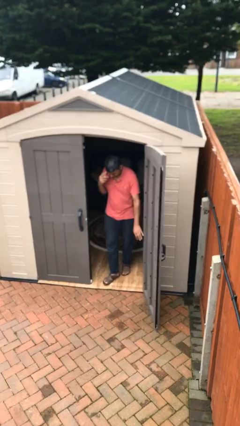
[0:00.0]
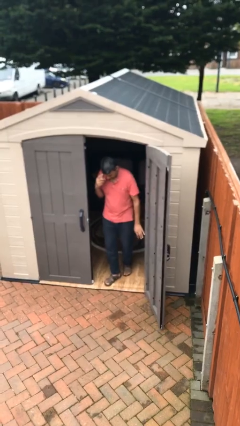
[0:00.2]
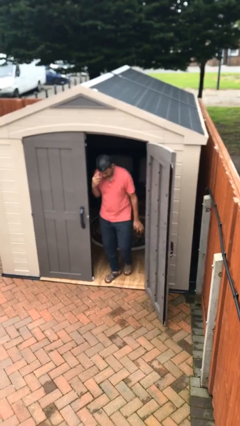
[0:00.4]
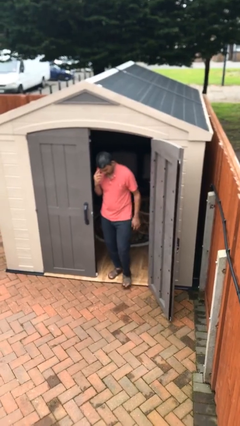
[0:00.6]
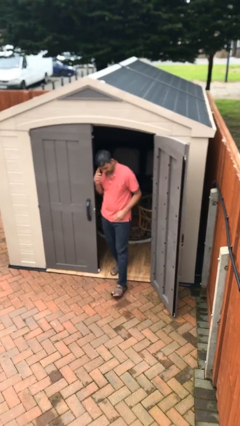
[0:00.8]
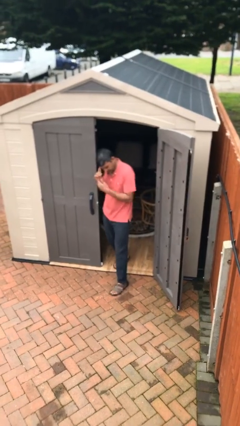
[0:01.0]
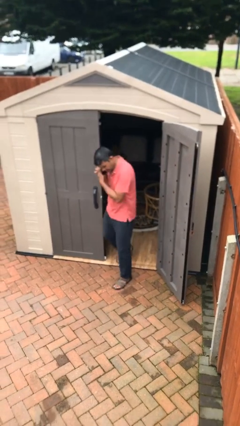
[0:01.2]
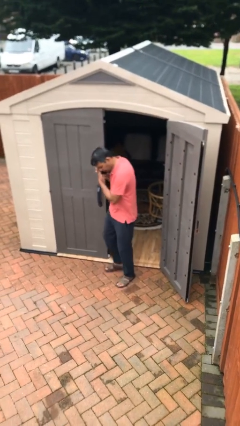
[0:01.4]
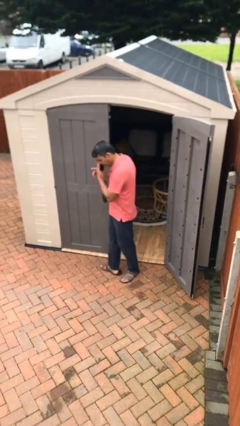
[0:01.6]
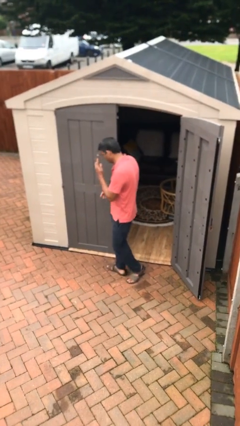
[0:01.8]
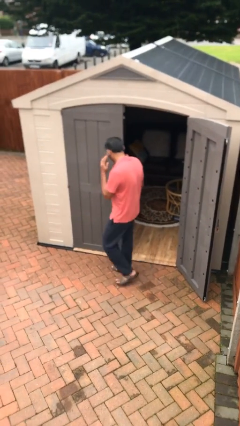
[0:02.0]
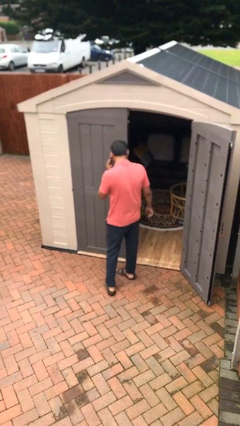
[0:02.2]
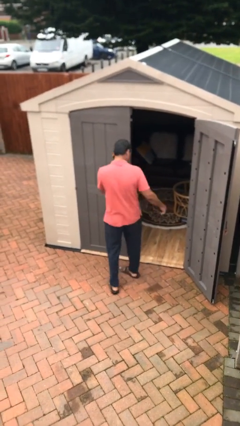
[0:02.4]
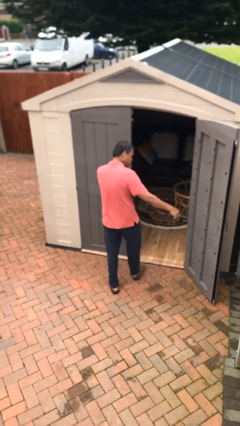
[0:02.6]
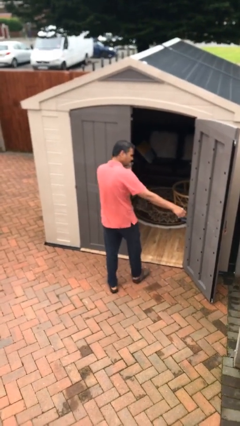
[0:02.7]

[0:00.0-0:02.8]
person enters scene through structure

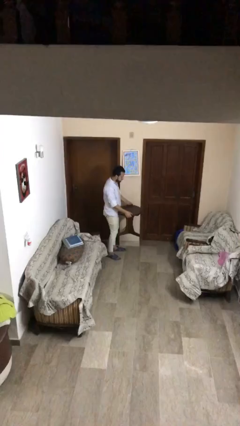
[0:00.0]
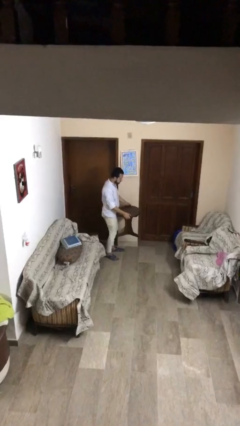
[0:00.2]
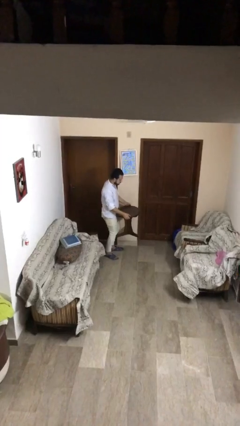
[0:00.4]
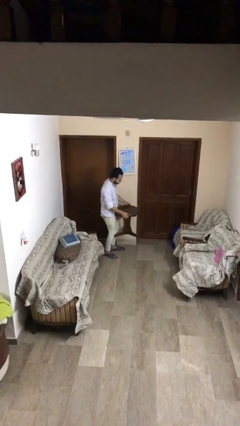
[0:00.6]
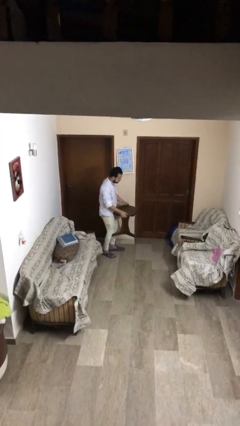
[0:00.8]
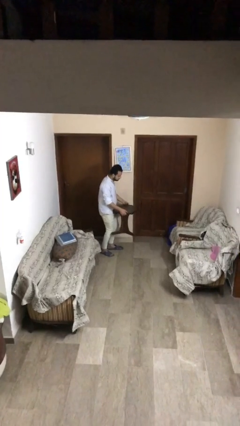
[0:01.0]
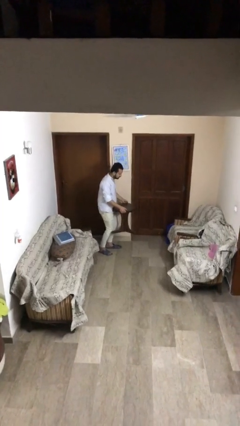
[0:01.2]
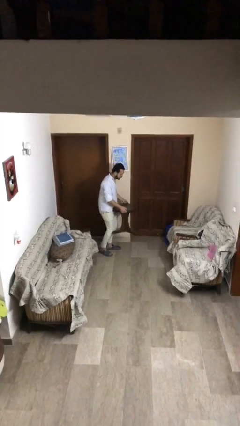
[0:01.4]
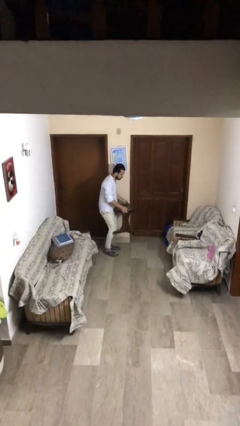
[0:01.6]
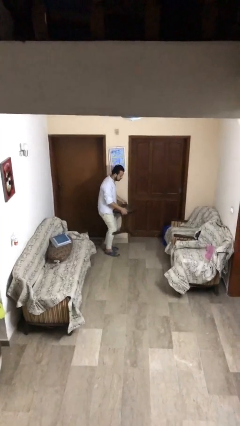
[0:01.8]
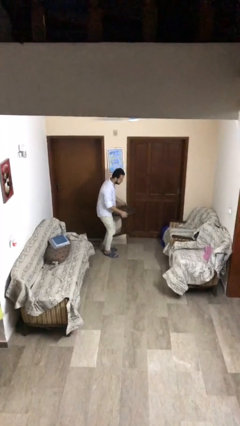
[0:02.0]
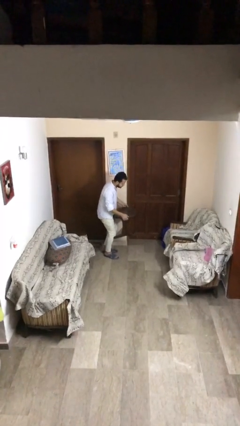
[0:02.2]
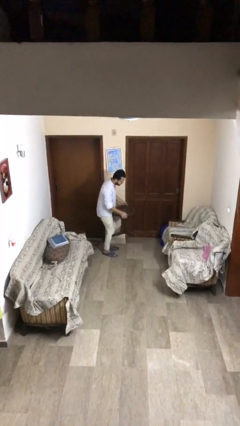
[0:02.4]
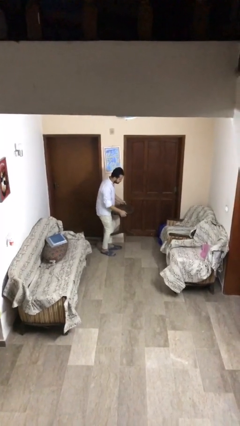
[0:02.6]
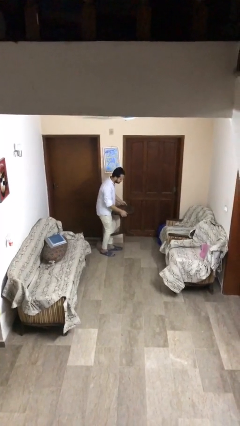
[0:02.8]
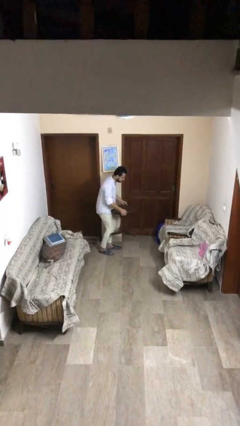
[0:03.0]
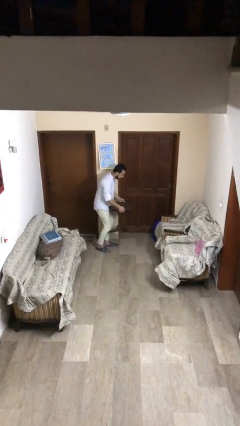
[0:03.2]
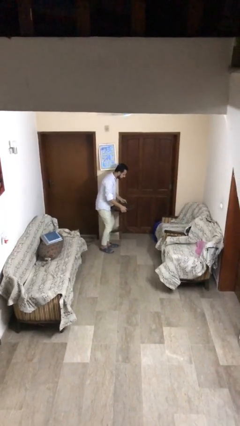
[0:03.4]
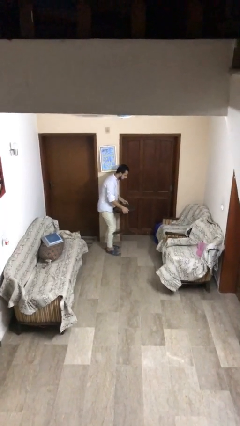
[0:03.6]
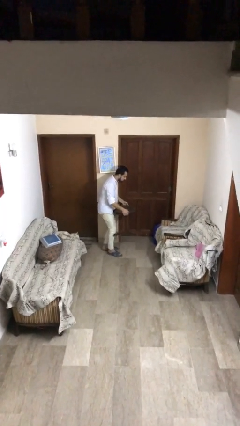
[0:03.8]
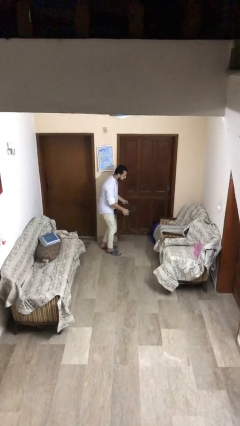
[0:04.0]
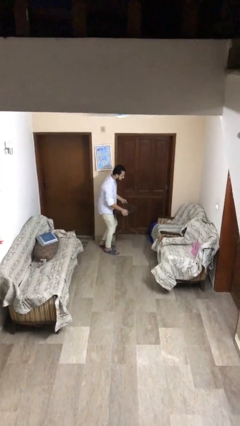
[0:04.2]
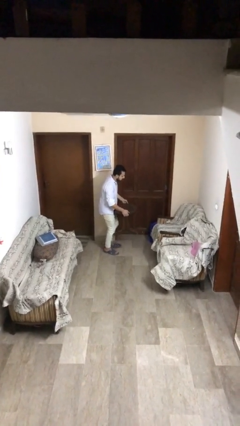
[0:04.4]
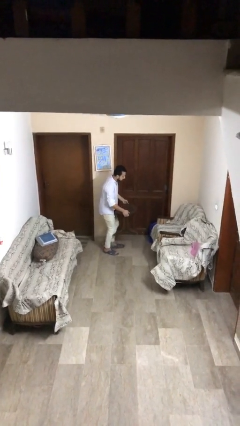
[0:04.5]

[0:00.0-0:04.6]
person carries heavy object

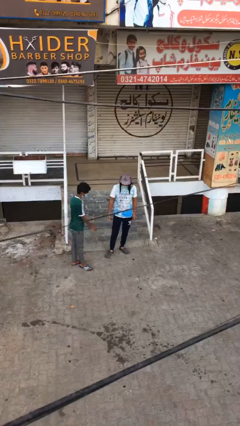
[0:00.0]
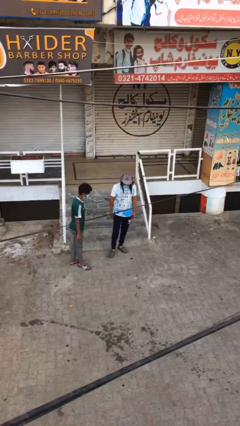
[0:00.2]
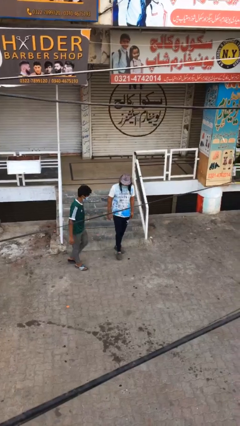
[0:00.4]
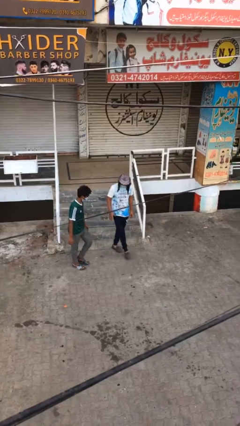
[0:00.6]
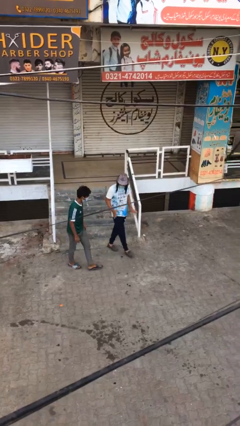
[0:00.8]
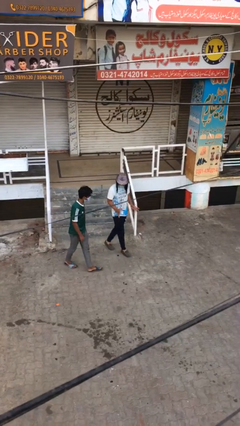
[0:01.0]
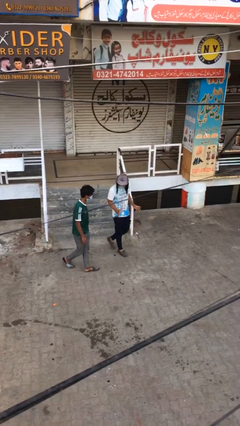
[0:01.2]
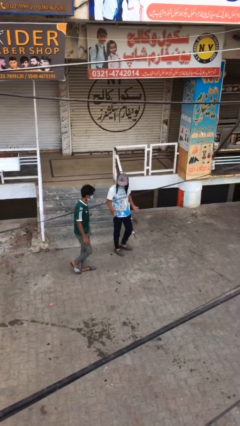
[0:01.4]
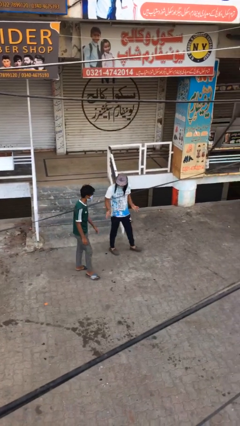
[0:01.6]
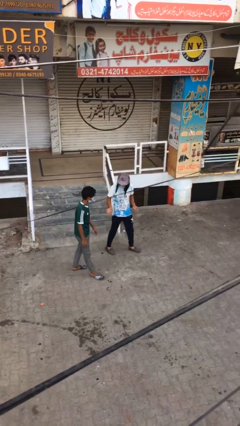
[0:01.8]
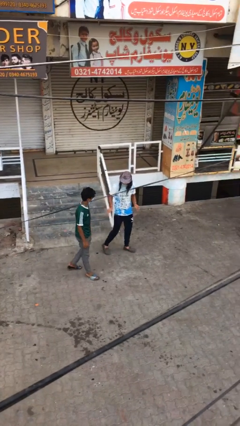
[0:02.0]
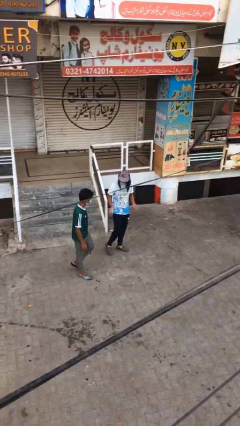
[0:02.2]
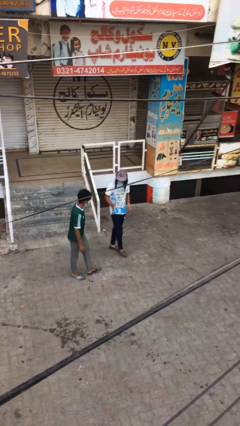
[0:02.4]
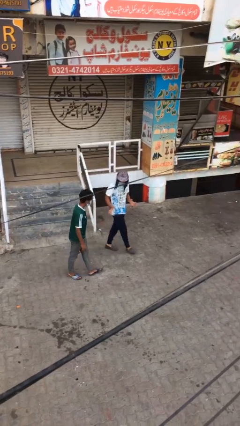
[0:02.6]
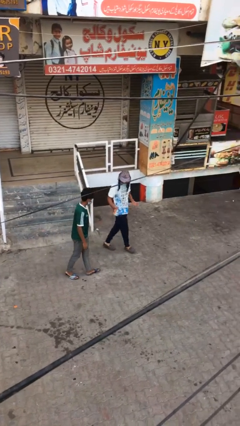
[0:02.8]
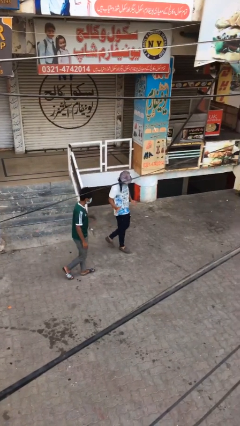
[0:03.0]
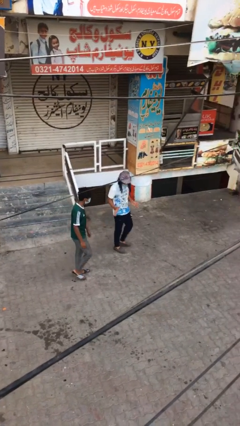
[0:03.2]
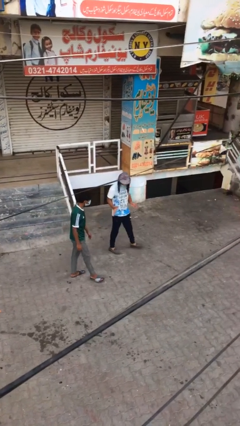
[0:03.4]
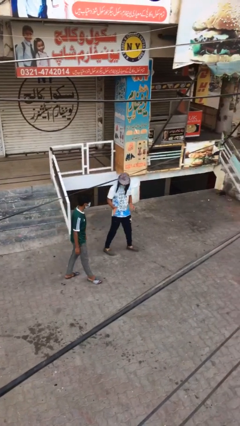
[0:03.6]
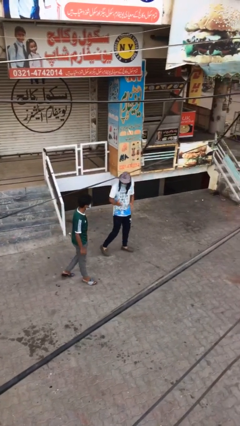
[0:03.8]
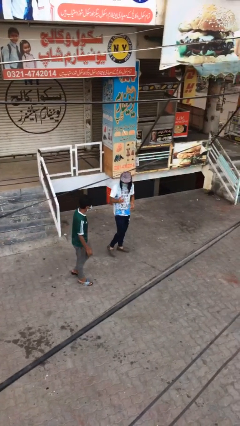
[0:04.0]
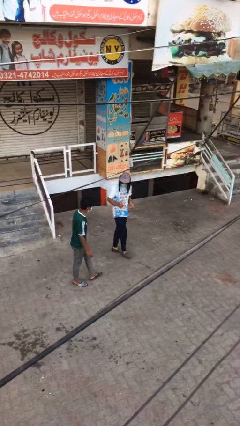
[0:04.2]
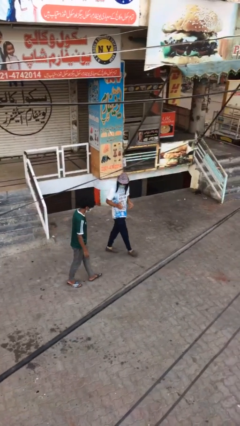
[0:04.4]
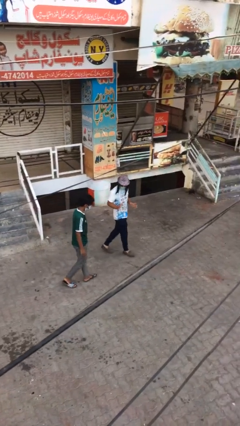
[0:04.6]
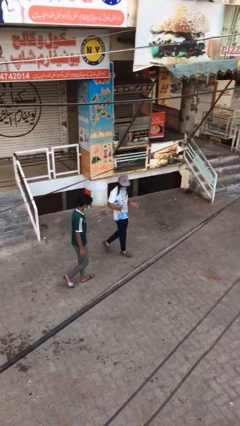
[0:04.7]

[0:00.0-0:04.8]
person talks to person

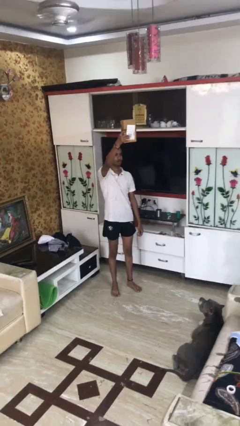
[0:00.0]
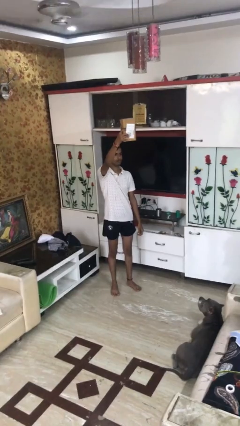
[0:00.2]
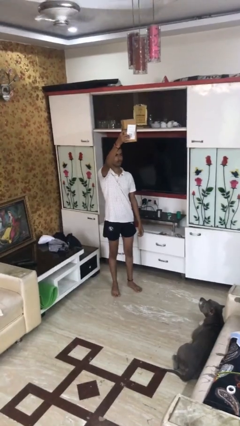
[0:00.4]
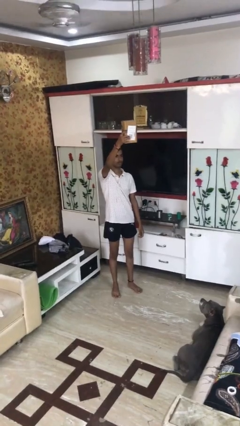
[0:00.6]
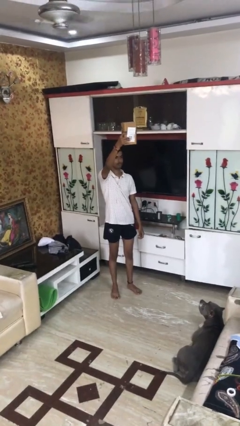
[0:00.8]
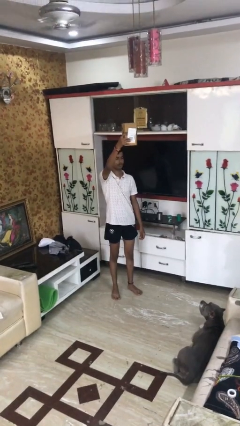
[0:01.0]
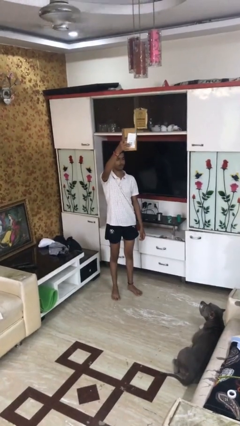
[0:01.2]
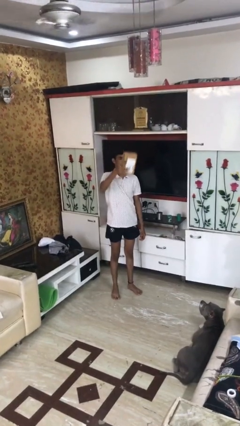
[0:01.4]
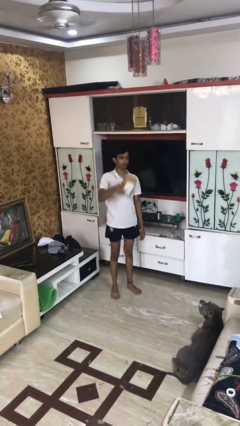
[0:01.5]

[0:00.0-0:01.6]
person holds object above head

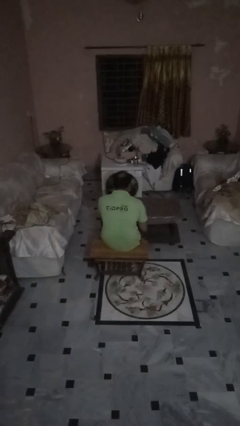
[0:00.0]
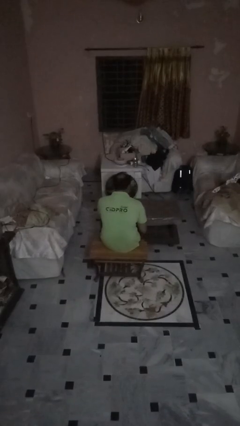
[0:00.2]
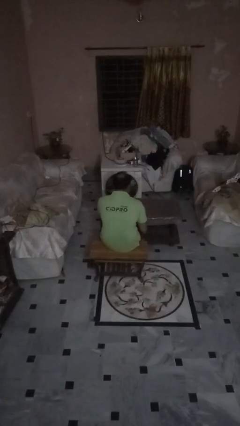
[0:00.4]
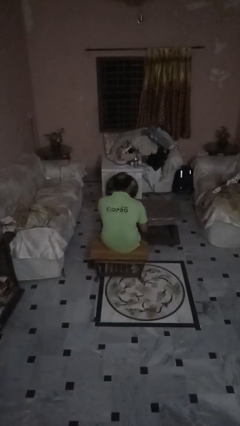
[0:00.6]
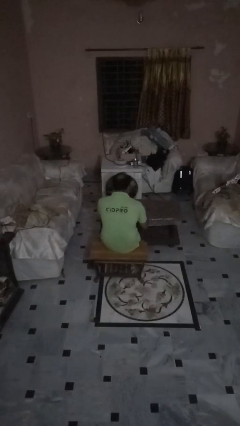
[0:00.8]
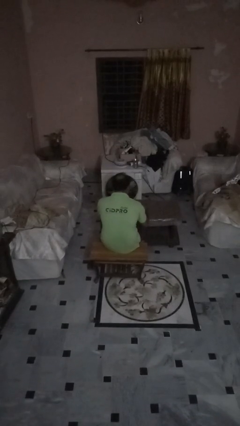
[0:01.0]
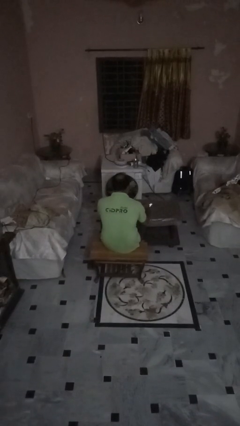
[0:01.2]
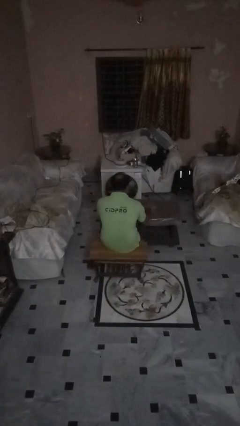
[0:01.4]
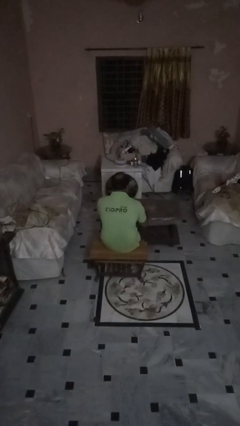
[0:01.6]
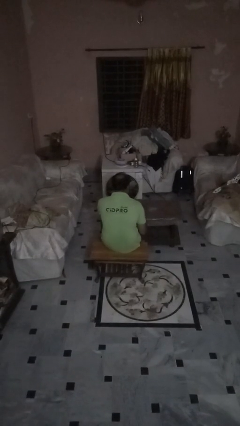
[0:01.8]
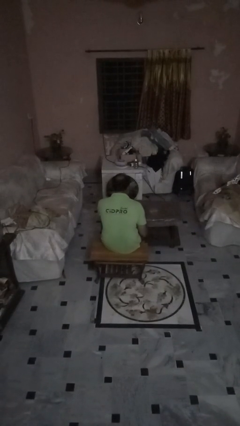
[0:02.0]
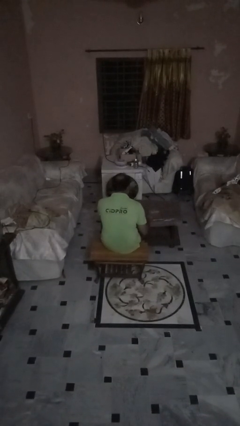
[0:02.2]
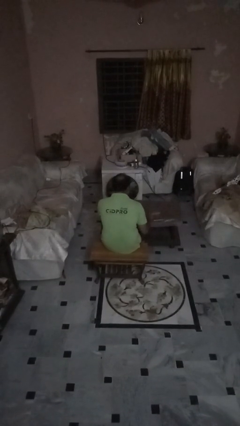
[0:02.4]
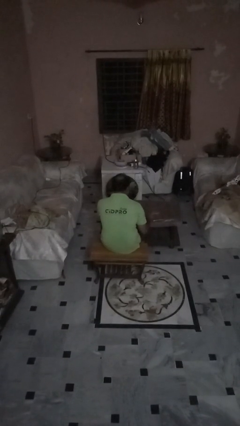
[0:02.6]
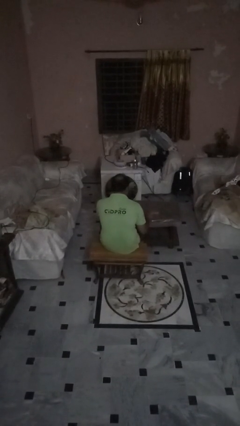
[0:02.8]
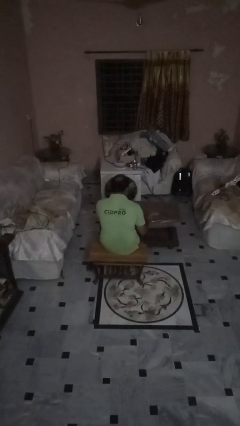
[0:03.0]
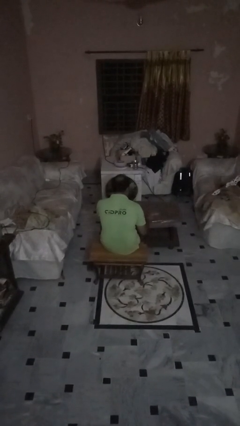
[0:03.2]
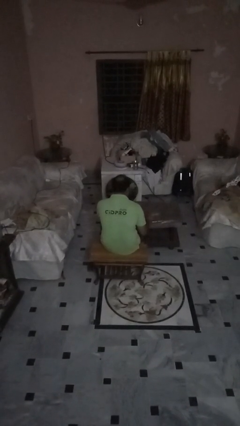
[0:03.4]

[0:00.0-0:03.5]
person knocks over glass

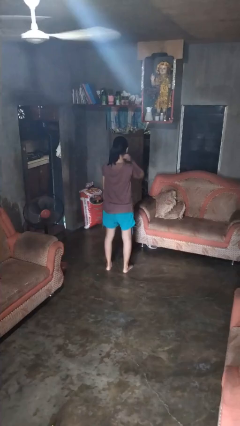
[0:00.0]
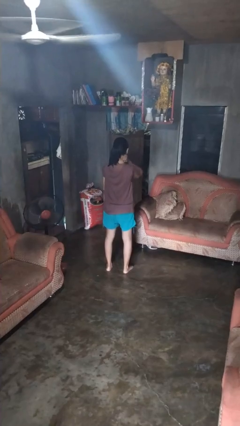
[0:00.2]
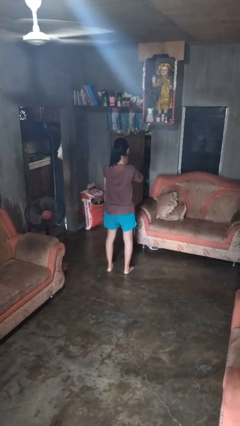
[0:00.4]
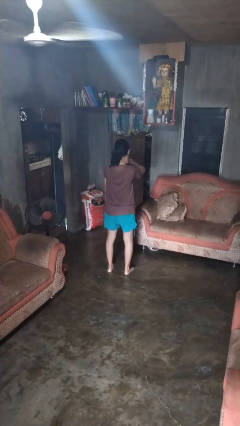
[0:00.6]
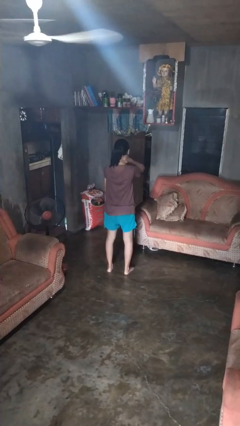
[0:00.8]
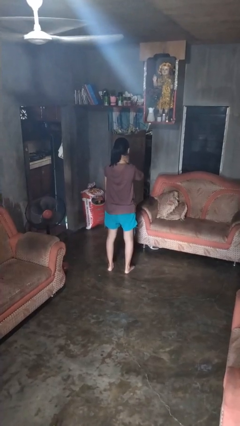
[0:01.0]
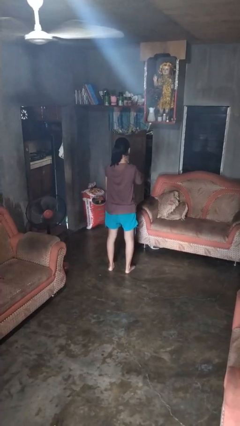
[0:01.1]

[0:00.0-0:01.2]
person rubs neck
